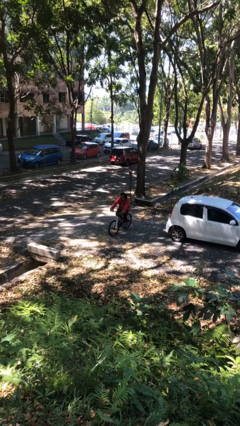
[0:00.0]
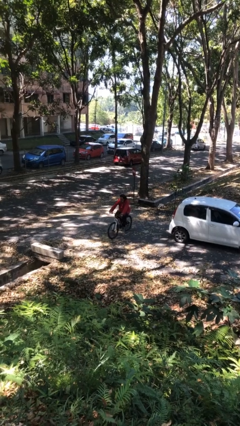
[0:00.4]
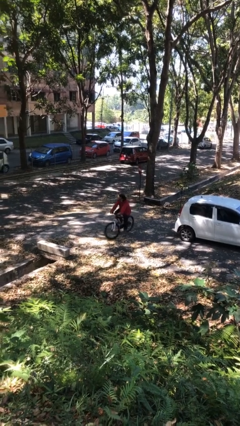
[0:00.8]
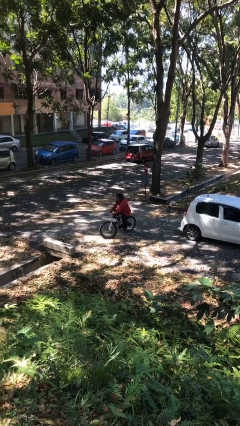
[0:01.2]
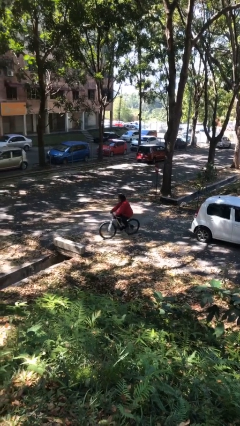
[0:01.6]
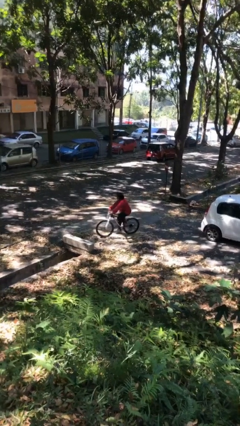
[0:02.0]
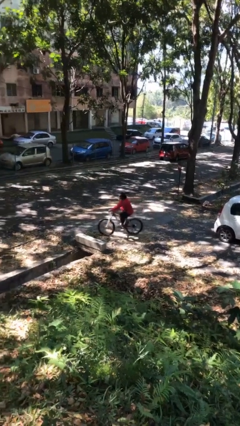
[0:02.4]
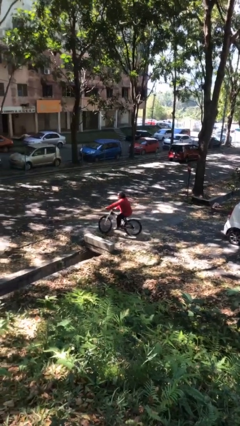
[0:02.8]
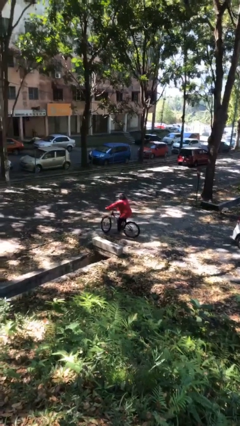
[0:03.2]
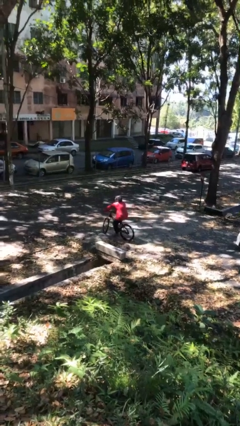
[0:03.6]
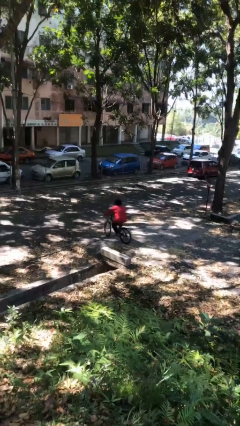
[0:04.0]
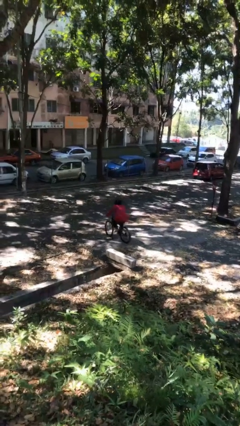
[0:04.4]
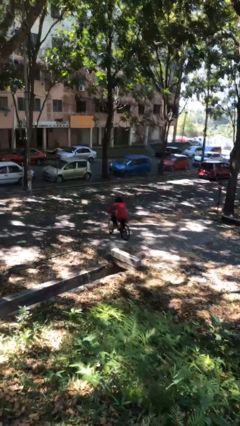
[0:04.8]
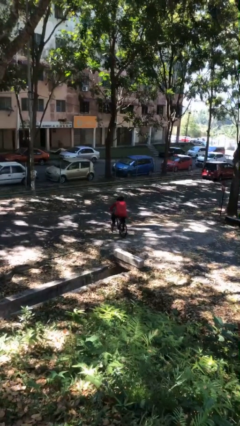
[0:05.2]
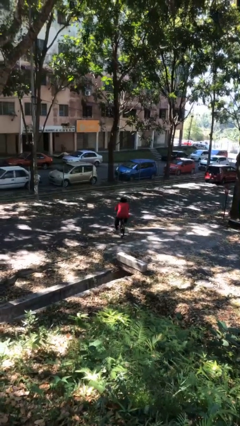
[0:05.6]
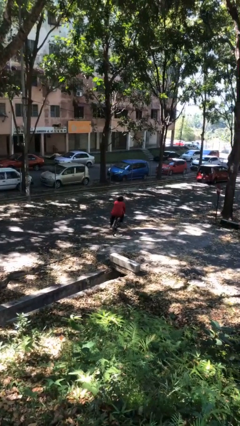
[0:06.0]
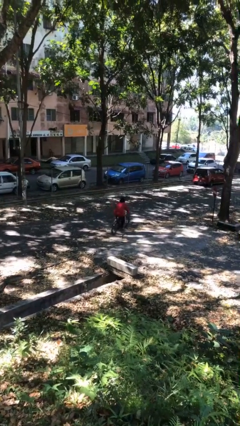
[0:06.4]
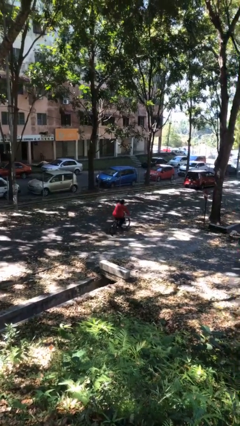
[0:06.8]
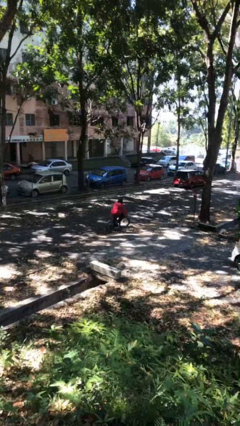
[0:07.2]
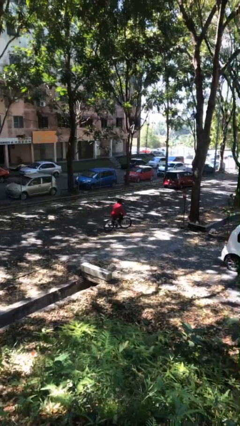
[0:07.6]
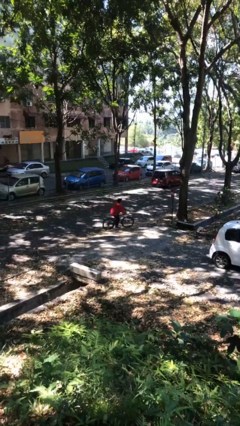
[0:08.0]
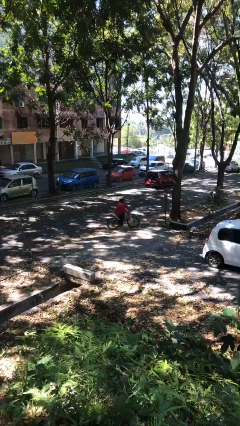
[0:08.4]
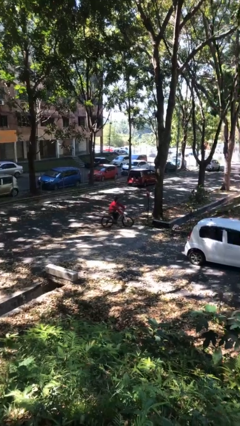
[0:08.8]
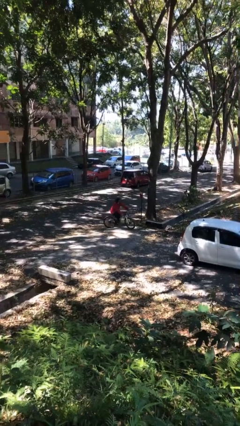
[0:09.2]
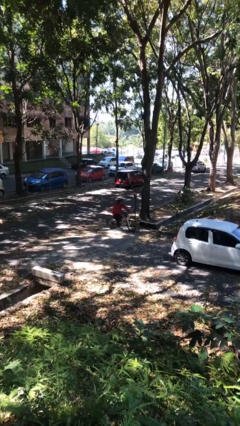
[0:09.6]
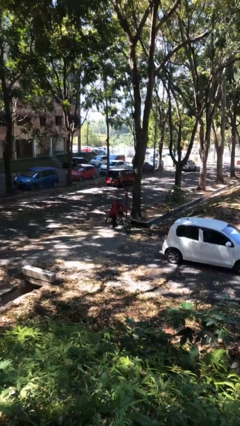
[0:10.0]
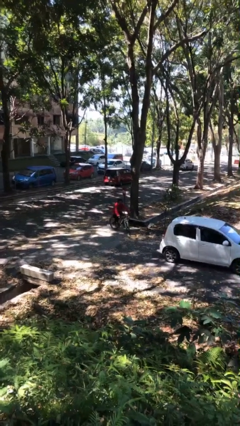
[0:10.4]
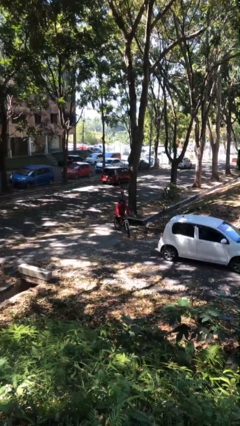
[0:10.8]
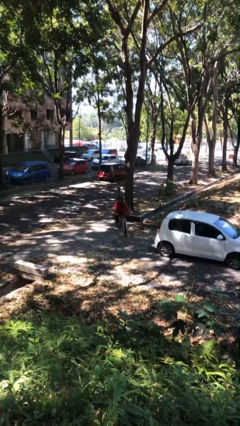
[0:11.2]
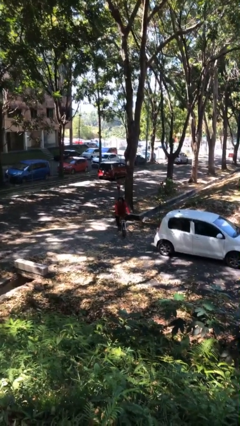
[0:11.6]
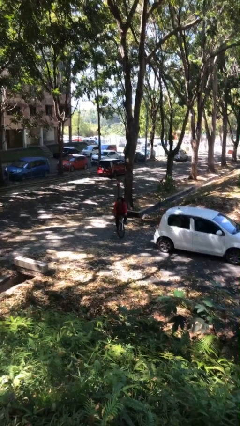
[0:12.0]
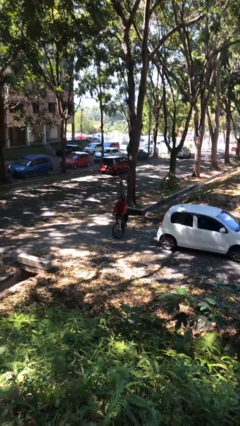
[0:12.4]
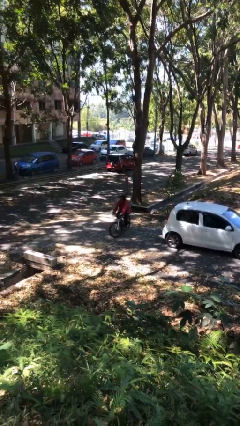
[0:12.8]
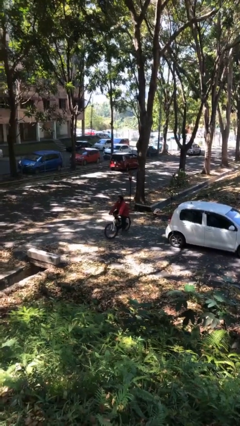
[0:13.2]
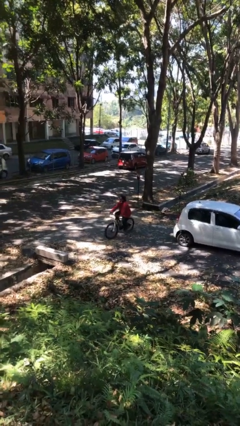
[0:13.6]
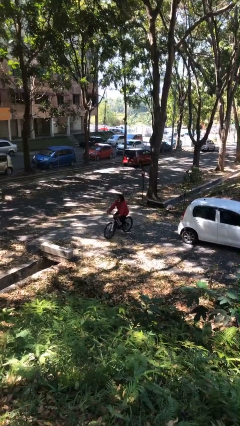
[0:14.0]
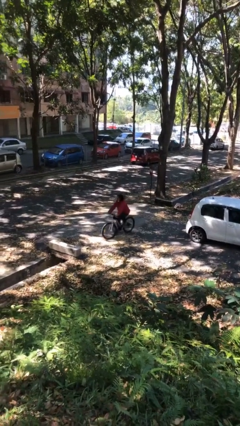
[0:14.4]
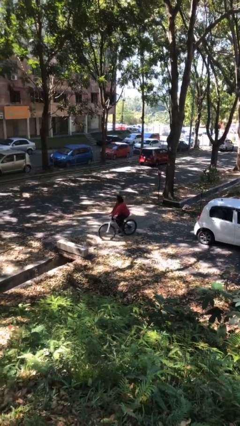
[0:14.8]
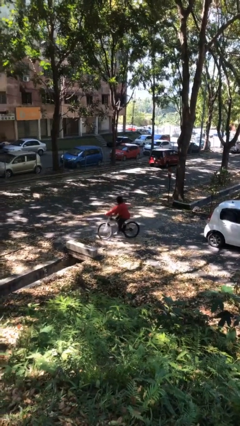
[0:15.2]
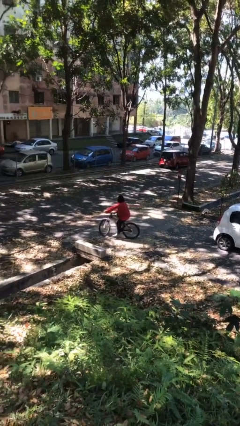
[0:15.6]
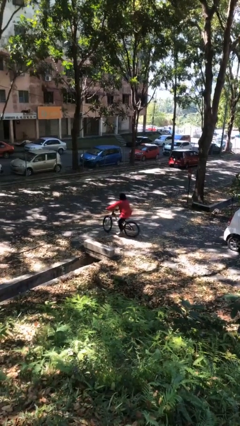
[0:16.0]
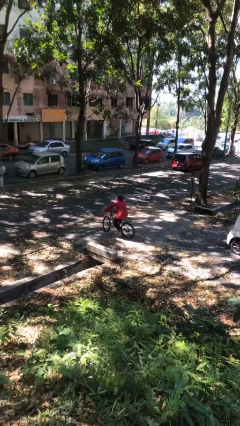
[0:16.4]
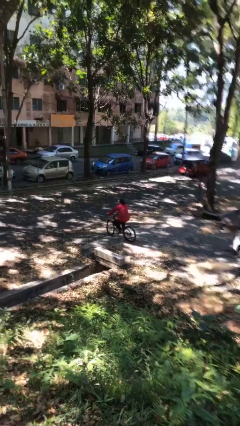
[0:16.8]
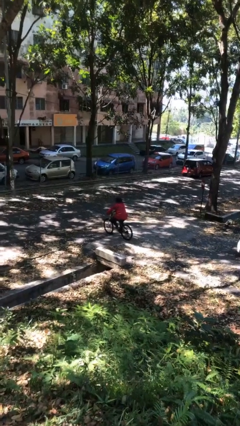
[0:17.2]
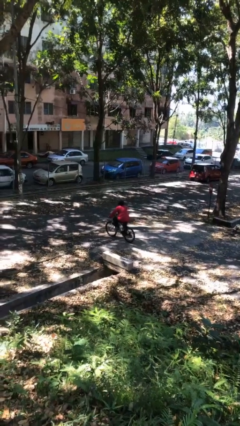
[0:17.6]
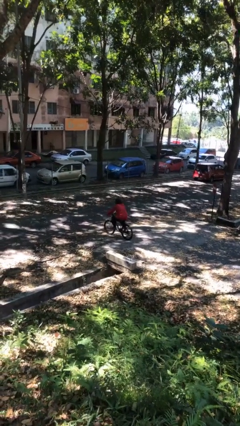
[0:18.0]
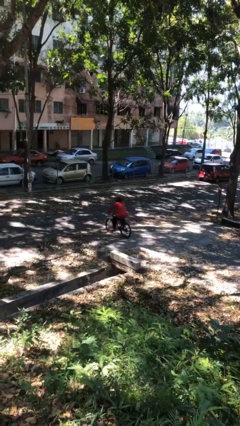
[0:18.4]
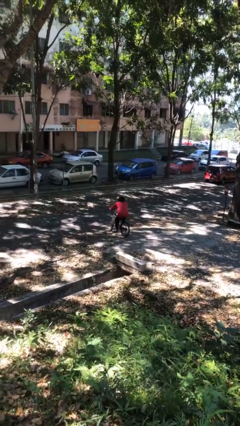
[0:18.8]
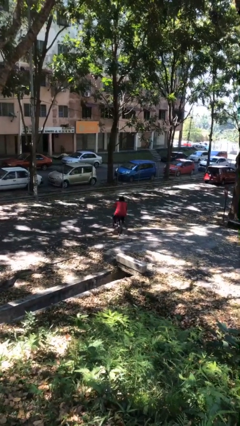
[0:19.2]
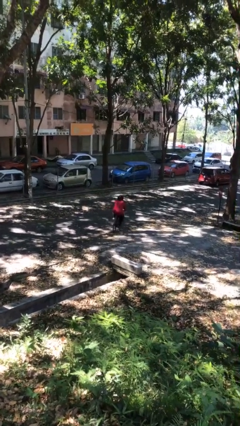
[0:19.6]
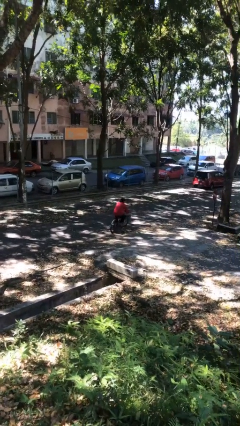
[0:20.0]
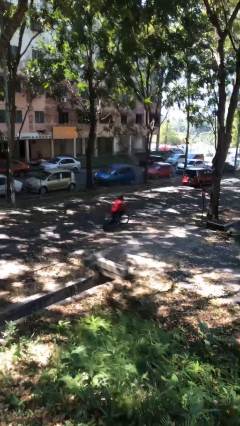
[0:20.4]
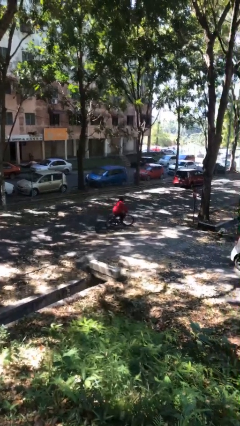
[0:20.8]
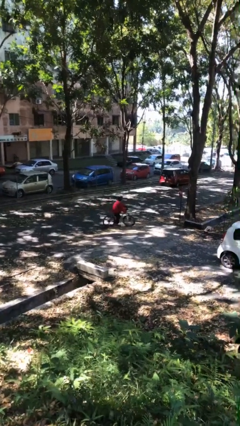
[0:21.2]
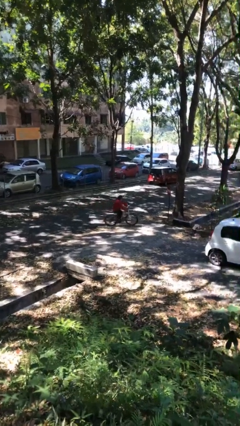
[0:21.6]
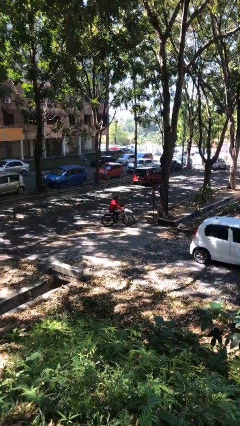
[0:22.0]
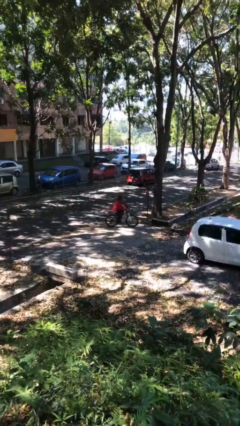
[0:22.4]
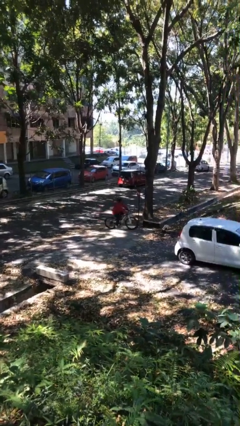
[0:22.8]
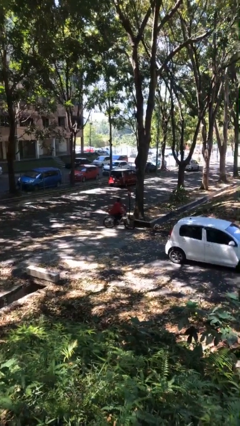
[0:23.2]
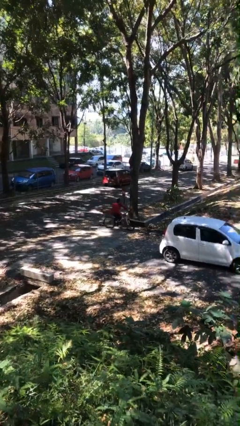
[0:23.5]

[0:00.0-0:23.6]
person rides bicycle

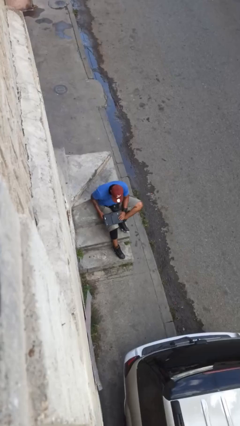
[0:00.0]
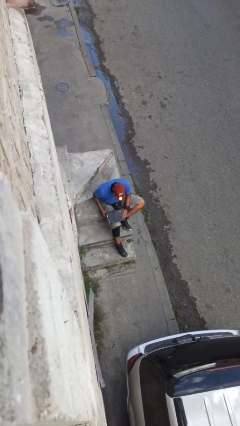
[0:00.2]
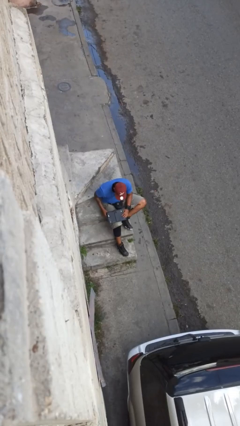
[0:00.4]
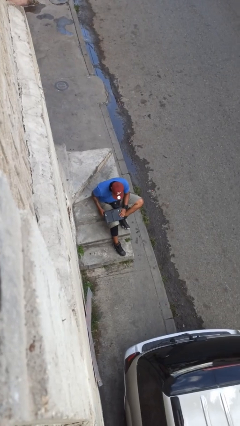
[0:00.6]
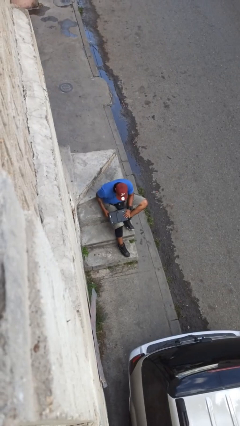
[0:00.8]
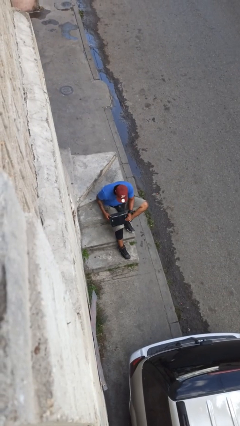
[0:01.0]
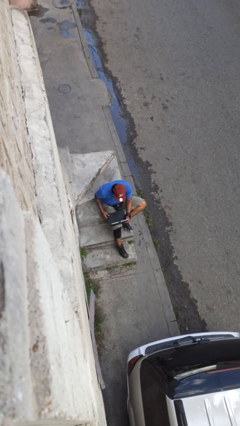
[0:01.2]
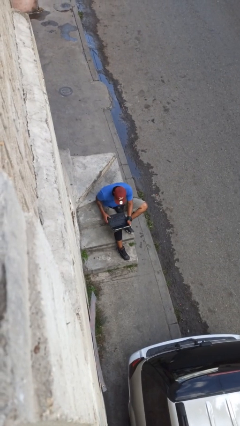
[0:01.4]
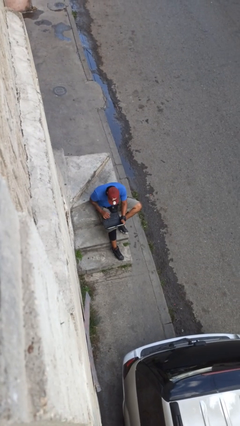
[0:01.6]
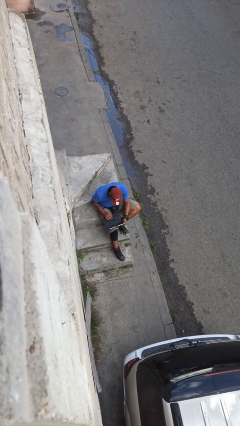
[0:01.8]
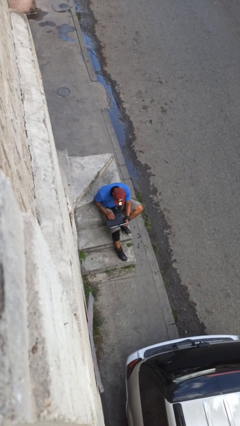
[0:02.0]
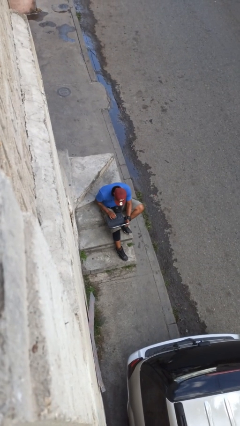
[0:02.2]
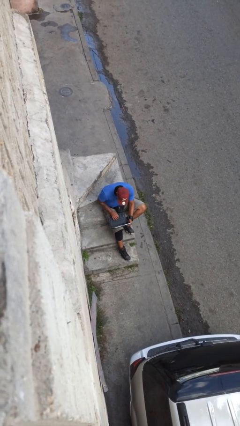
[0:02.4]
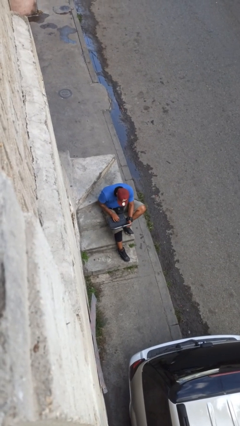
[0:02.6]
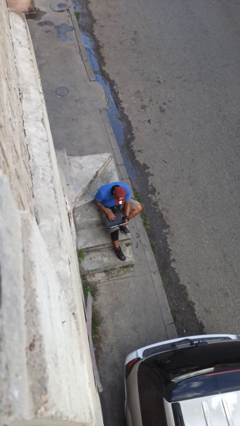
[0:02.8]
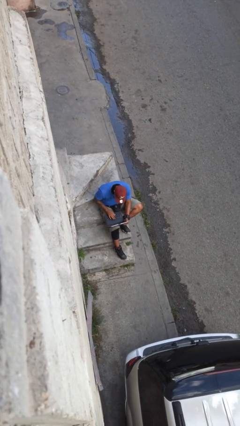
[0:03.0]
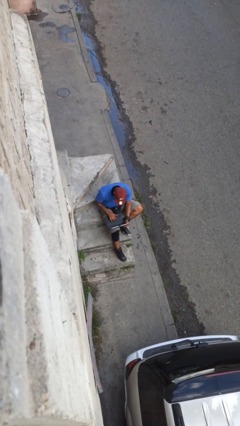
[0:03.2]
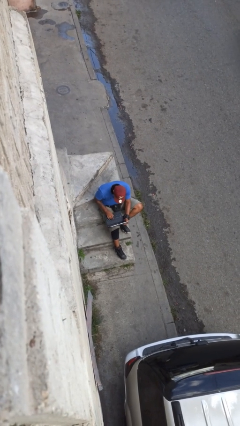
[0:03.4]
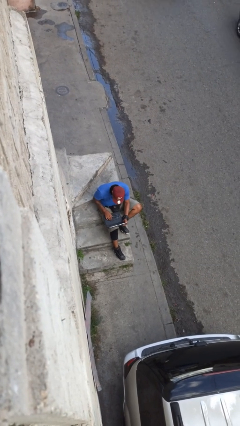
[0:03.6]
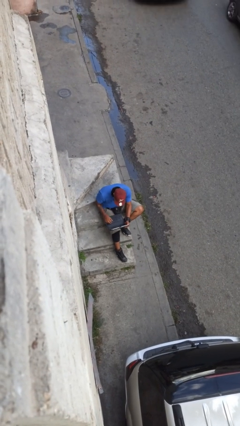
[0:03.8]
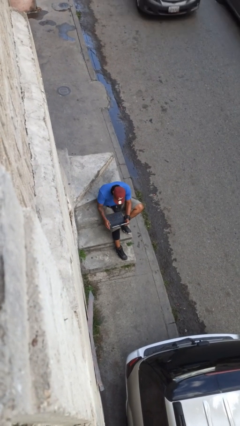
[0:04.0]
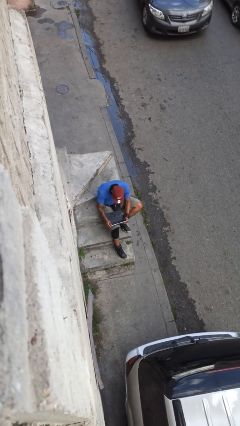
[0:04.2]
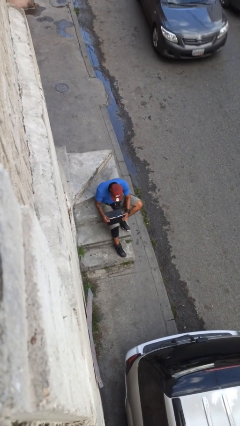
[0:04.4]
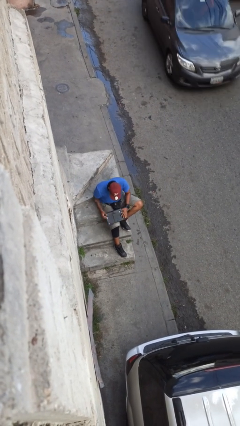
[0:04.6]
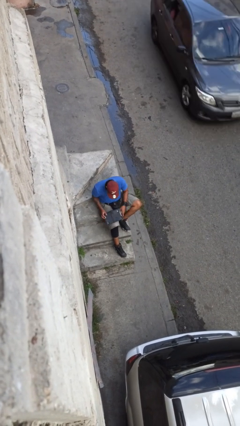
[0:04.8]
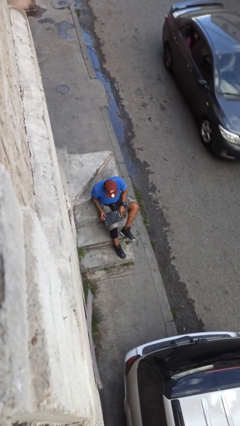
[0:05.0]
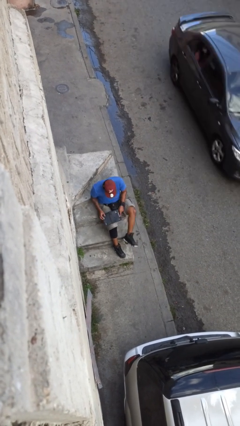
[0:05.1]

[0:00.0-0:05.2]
person interacts with laptop

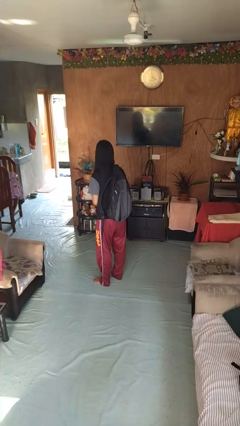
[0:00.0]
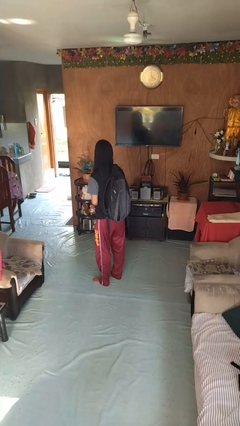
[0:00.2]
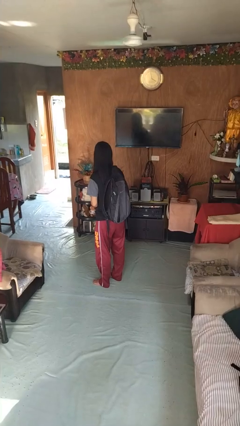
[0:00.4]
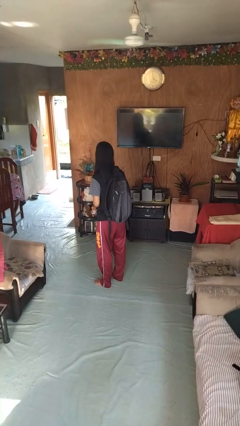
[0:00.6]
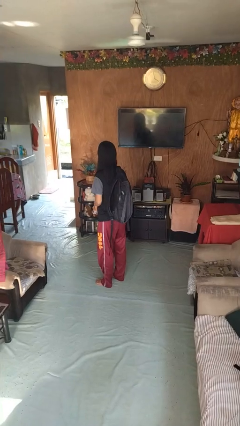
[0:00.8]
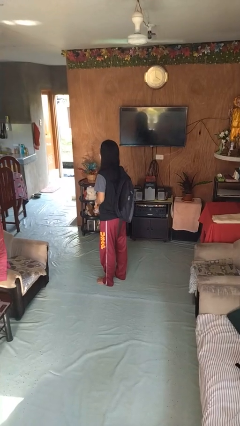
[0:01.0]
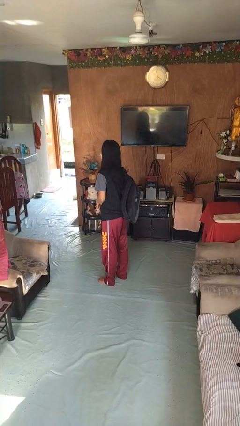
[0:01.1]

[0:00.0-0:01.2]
person takes off backpack
